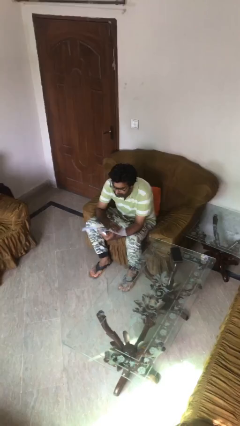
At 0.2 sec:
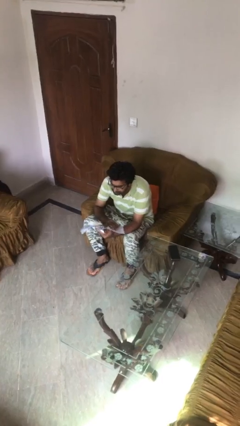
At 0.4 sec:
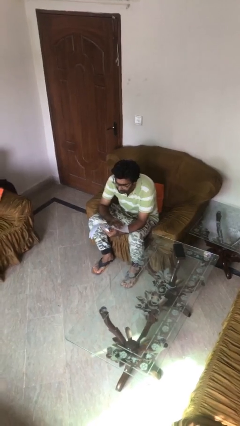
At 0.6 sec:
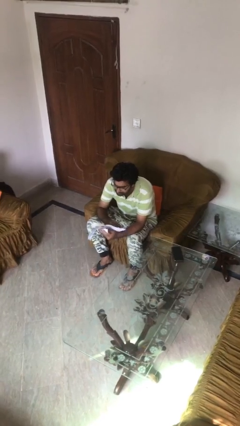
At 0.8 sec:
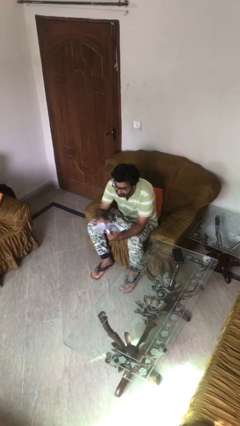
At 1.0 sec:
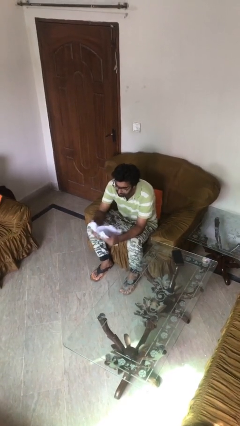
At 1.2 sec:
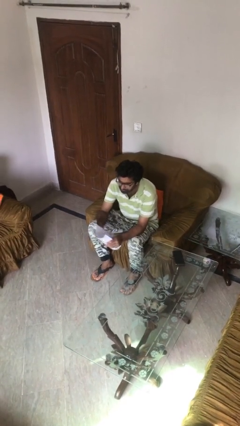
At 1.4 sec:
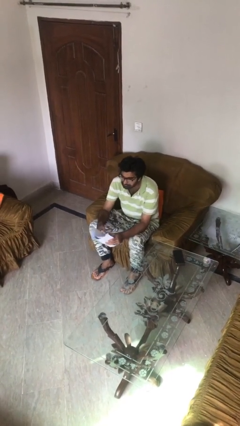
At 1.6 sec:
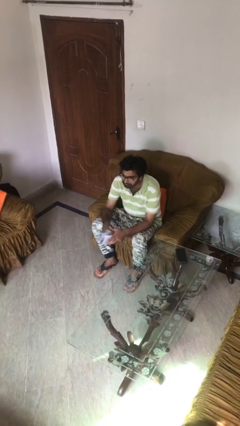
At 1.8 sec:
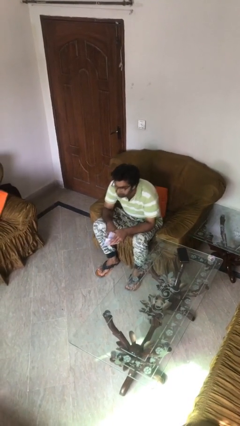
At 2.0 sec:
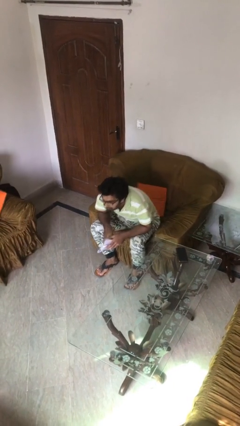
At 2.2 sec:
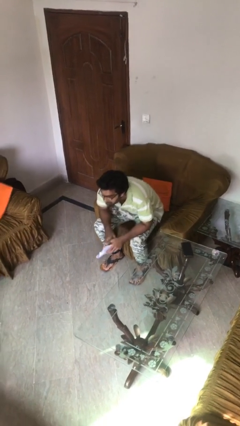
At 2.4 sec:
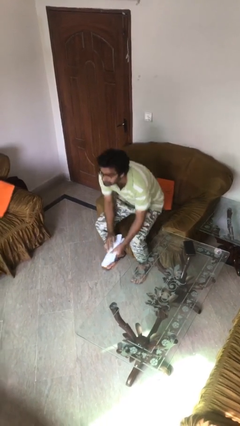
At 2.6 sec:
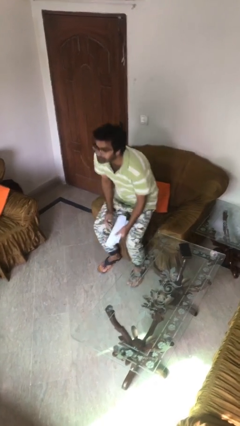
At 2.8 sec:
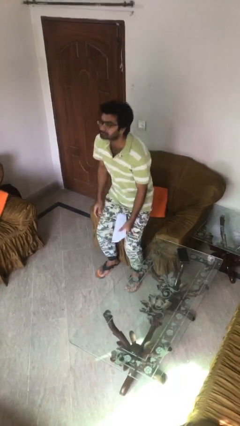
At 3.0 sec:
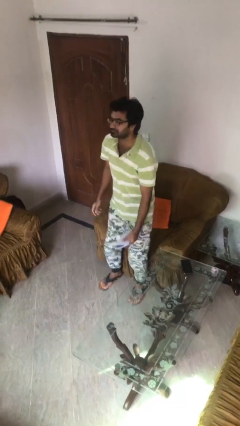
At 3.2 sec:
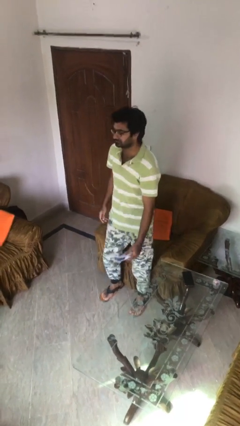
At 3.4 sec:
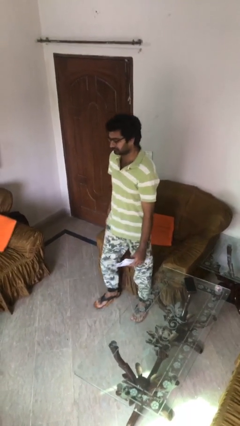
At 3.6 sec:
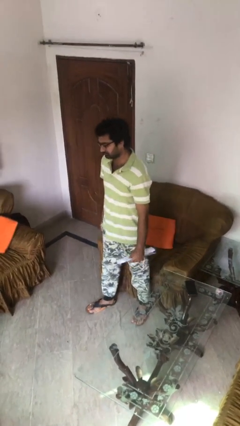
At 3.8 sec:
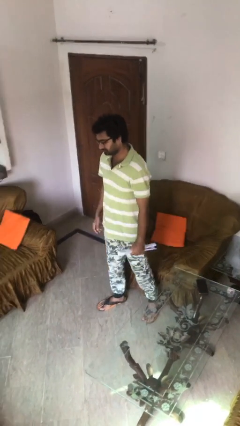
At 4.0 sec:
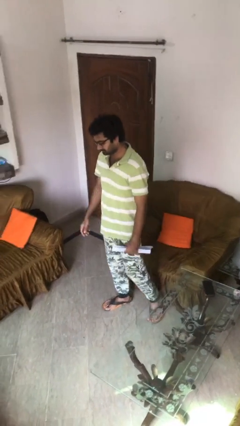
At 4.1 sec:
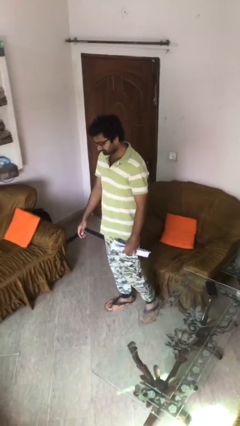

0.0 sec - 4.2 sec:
person stands up

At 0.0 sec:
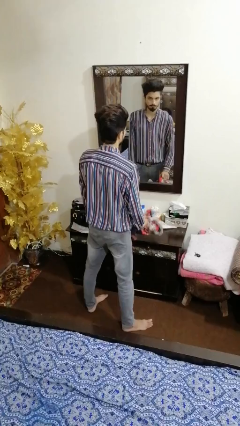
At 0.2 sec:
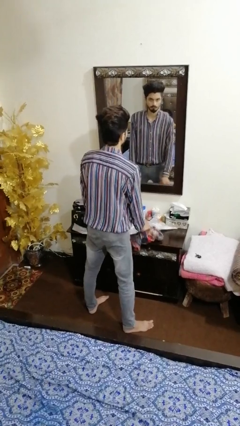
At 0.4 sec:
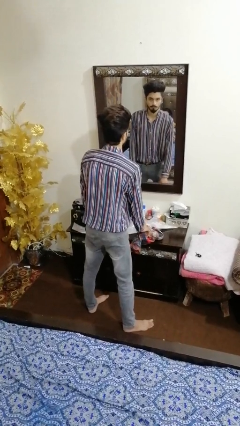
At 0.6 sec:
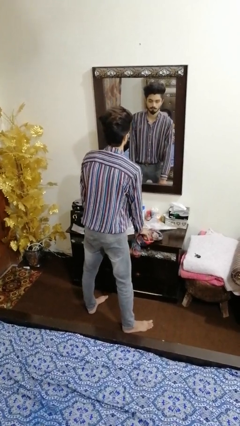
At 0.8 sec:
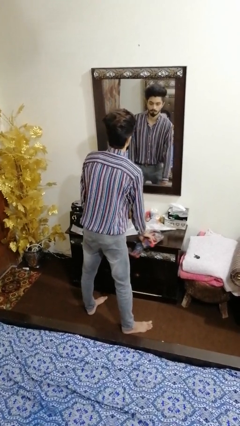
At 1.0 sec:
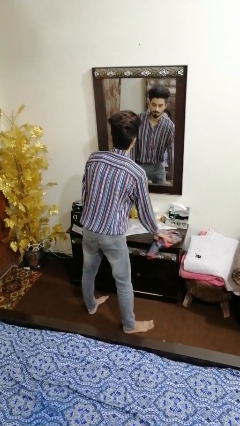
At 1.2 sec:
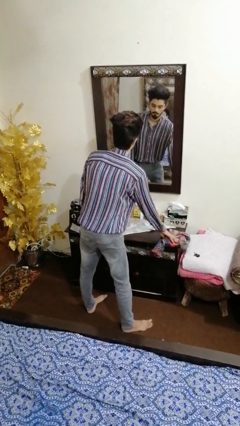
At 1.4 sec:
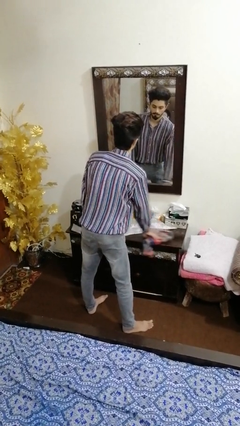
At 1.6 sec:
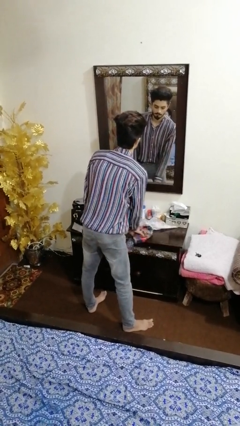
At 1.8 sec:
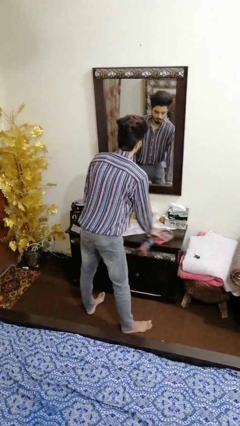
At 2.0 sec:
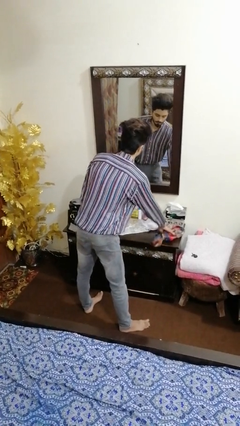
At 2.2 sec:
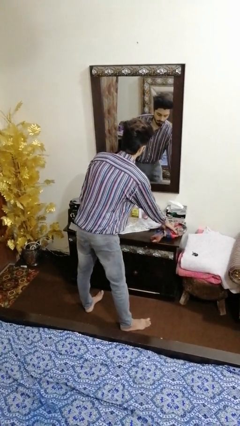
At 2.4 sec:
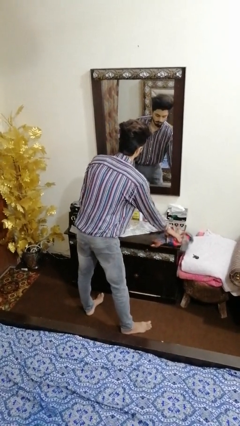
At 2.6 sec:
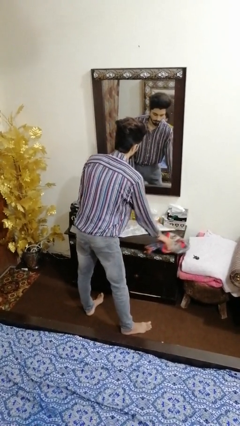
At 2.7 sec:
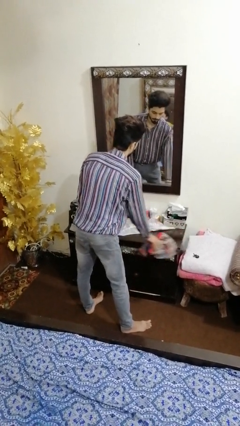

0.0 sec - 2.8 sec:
person cleans table with rag

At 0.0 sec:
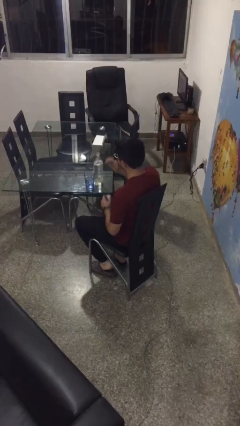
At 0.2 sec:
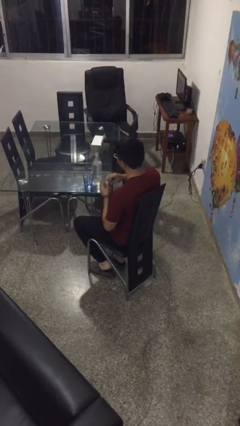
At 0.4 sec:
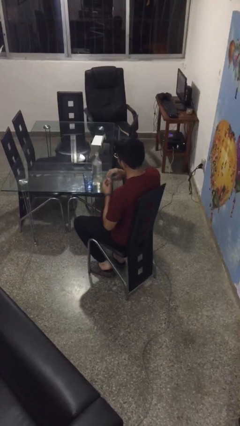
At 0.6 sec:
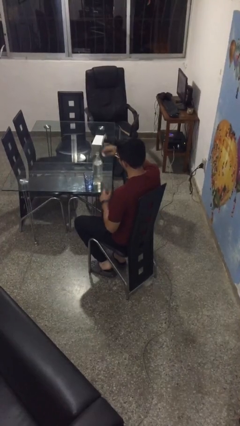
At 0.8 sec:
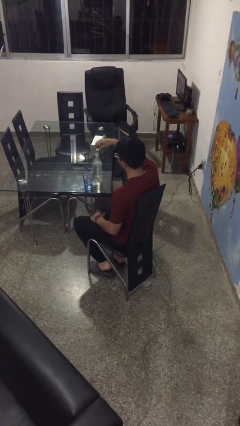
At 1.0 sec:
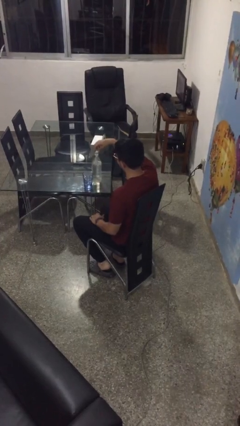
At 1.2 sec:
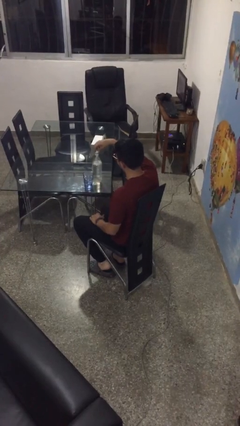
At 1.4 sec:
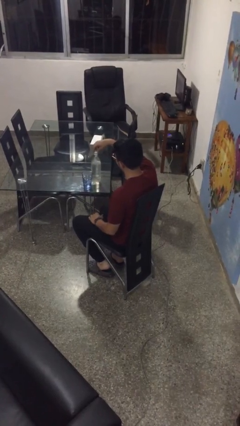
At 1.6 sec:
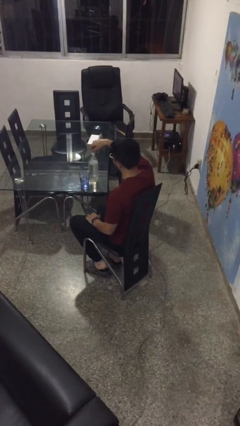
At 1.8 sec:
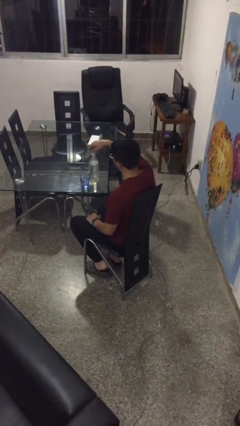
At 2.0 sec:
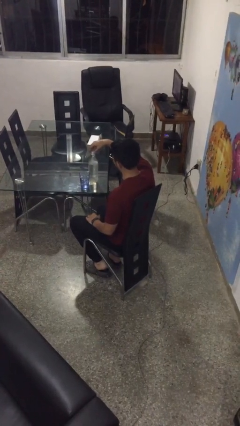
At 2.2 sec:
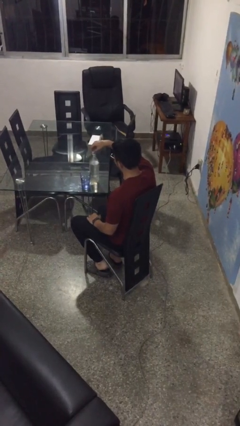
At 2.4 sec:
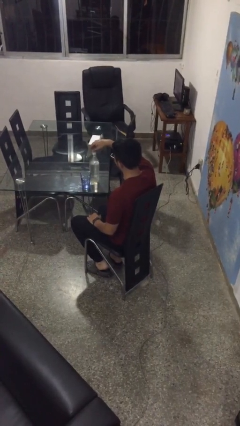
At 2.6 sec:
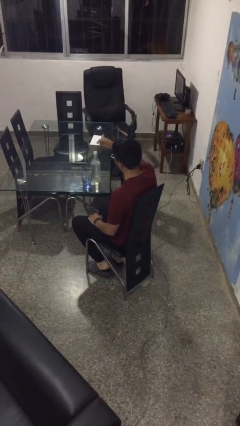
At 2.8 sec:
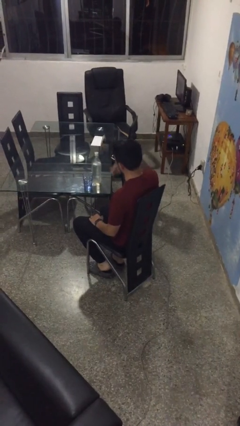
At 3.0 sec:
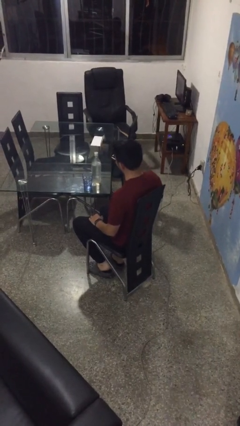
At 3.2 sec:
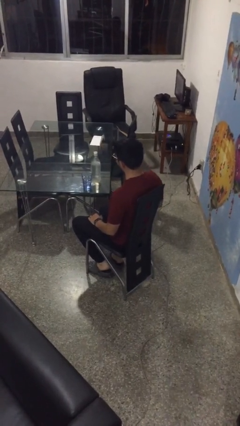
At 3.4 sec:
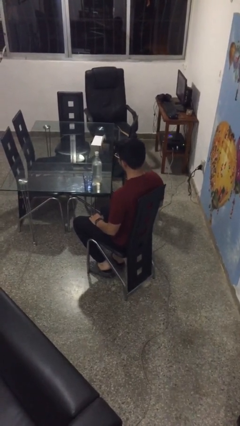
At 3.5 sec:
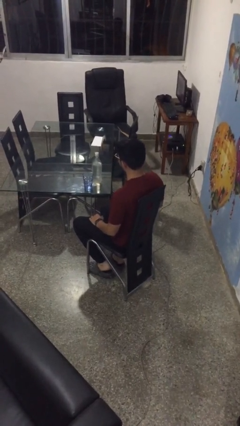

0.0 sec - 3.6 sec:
person screws lid to bottle

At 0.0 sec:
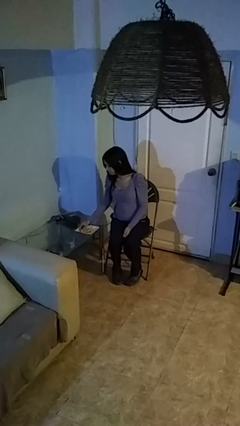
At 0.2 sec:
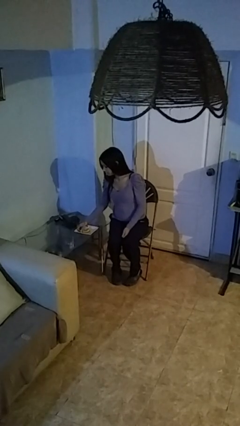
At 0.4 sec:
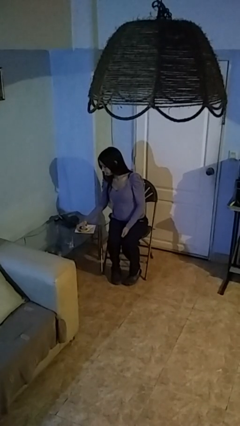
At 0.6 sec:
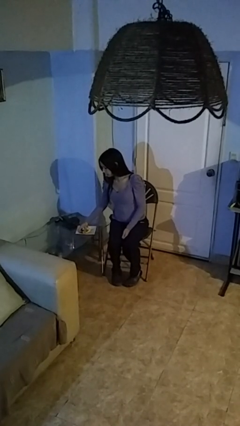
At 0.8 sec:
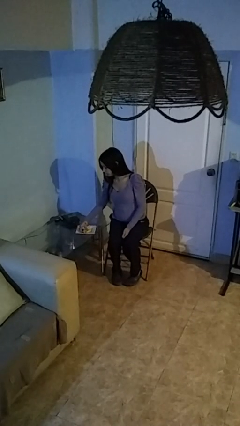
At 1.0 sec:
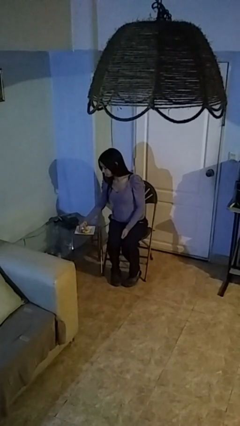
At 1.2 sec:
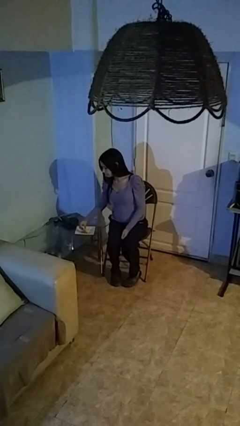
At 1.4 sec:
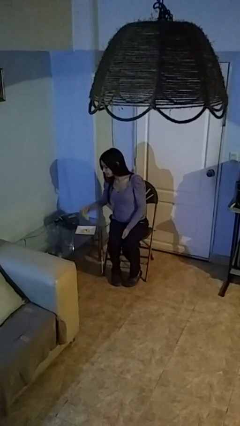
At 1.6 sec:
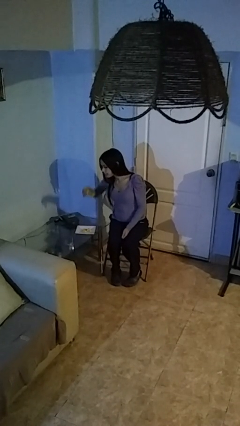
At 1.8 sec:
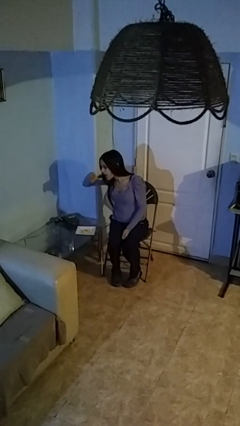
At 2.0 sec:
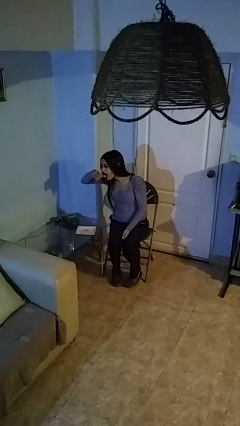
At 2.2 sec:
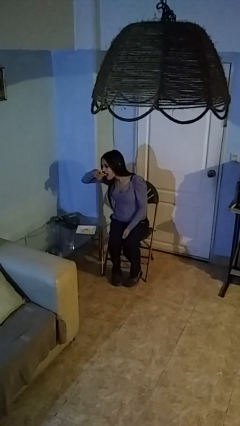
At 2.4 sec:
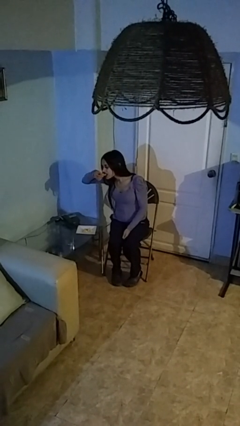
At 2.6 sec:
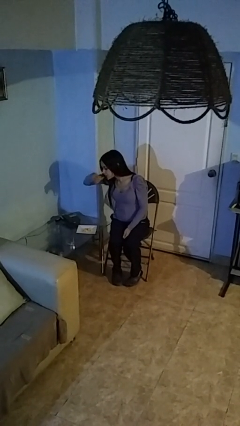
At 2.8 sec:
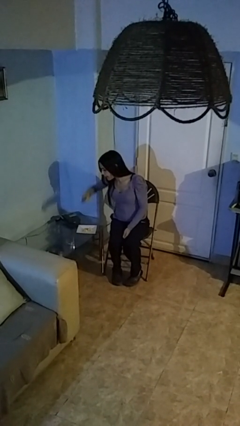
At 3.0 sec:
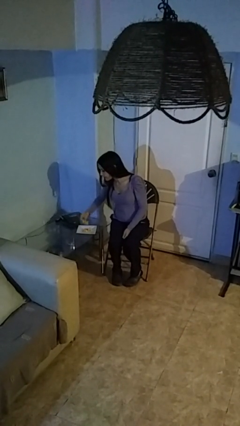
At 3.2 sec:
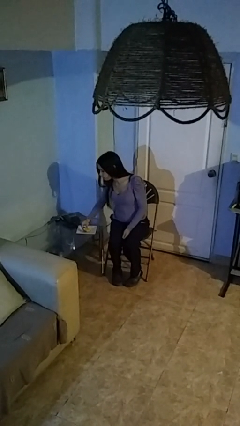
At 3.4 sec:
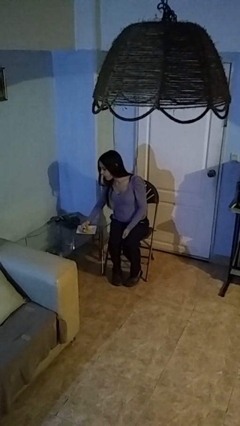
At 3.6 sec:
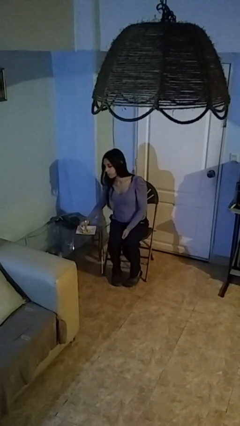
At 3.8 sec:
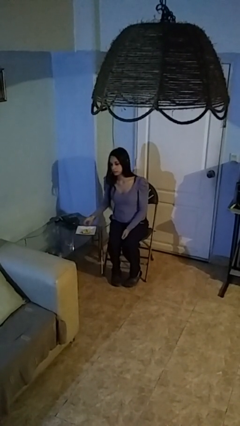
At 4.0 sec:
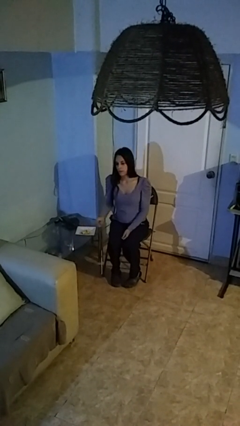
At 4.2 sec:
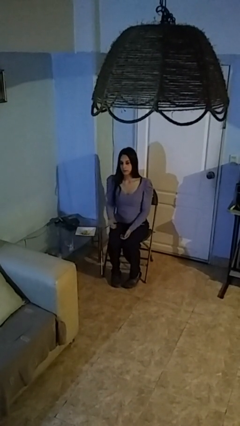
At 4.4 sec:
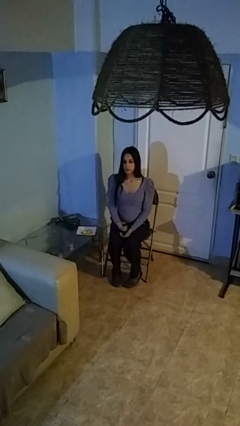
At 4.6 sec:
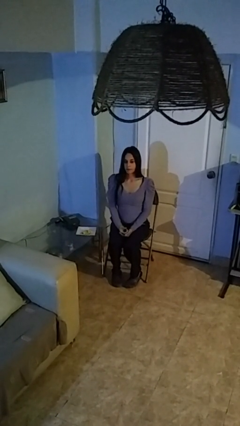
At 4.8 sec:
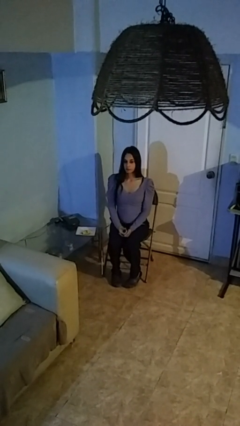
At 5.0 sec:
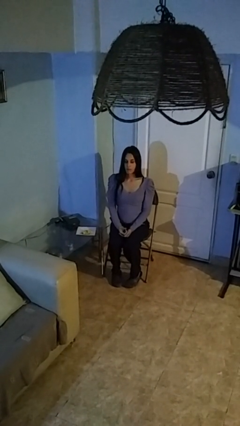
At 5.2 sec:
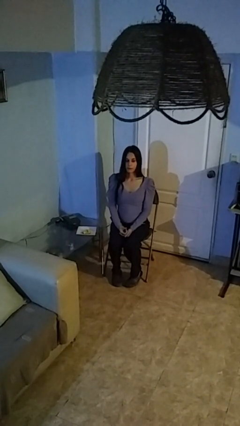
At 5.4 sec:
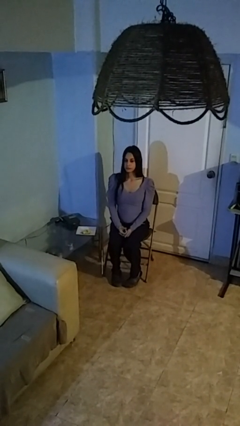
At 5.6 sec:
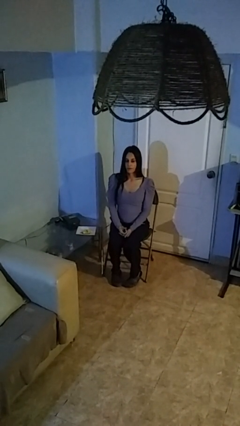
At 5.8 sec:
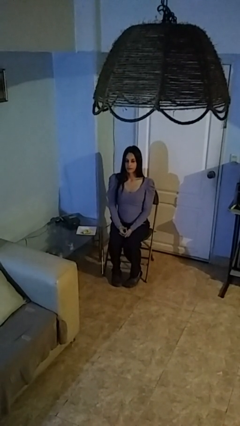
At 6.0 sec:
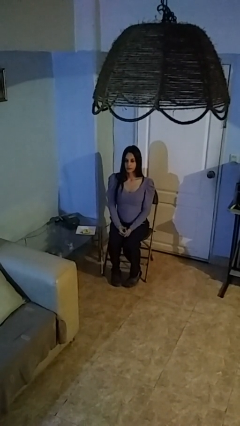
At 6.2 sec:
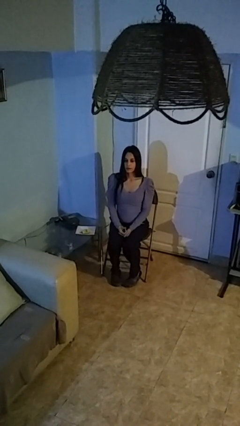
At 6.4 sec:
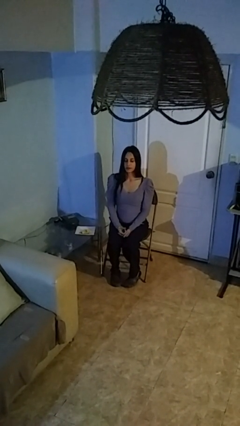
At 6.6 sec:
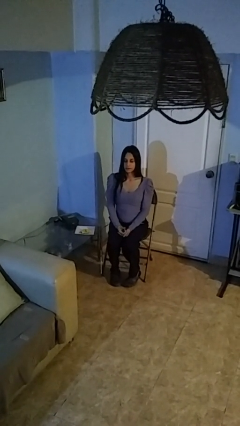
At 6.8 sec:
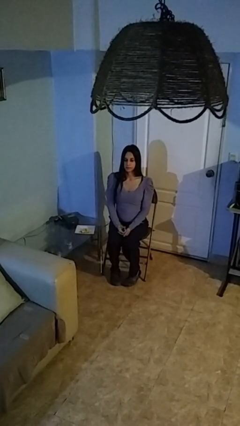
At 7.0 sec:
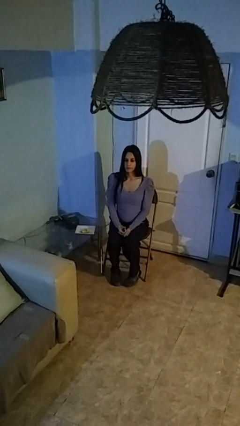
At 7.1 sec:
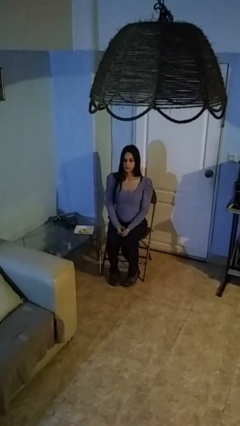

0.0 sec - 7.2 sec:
person eats with hands
